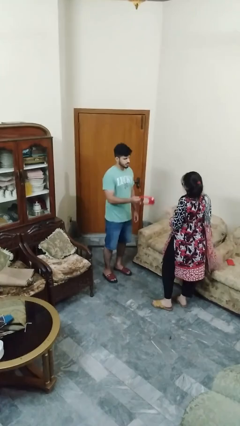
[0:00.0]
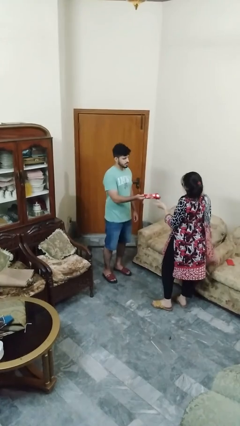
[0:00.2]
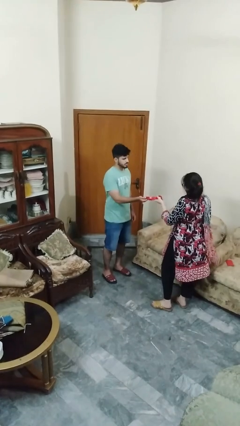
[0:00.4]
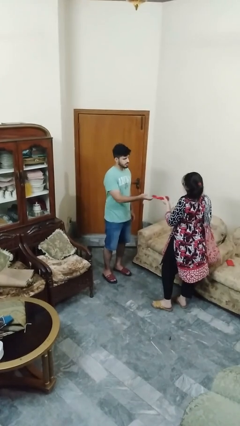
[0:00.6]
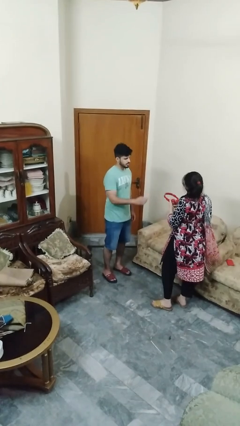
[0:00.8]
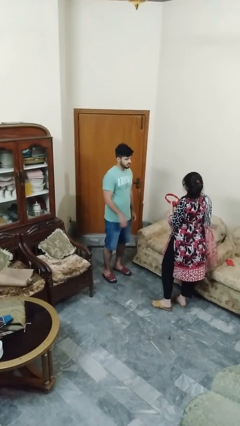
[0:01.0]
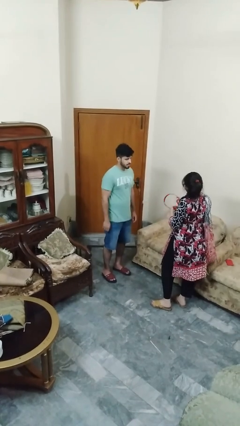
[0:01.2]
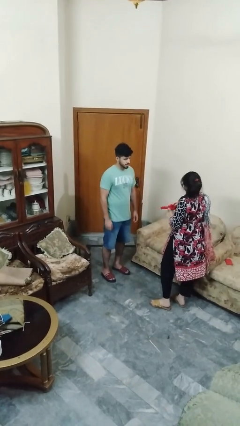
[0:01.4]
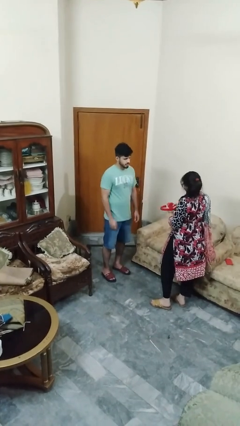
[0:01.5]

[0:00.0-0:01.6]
person transfers object to person

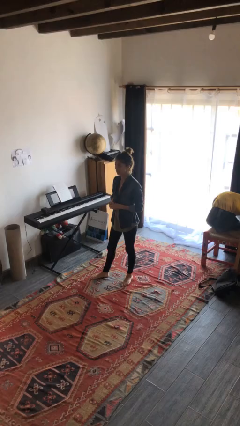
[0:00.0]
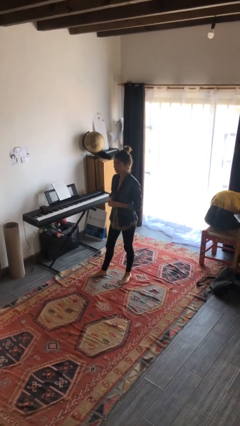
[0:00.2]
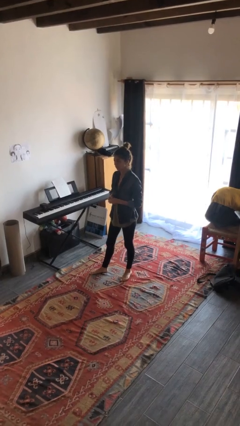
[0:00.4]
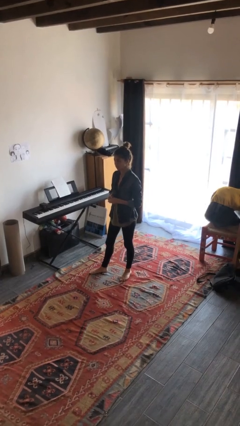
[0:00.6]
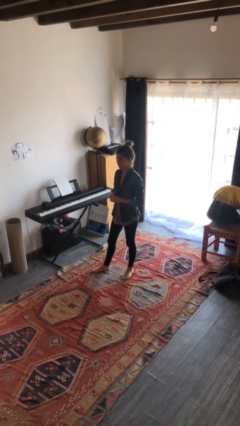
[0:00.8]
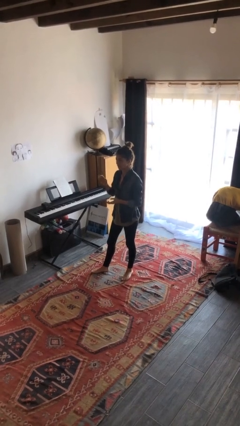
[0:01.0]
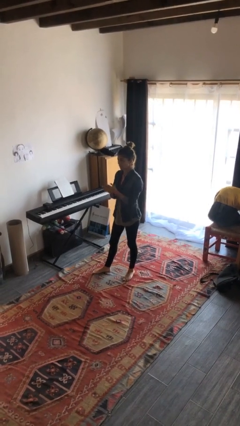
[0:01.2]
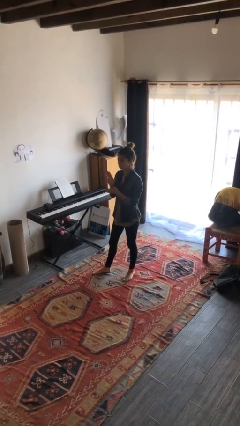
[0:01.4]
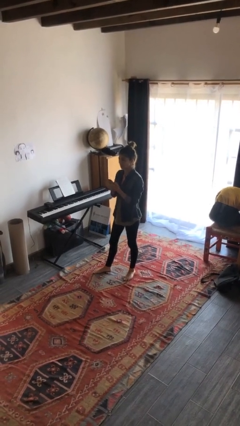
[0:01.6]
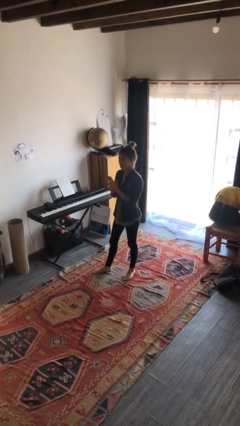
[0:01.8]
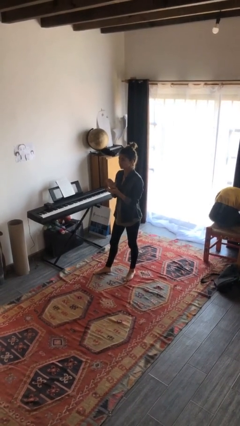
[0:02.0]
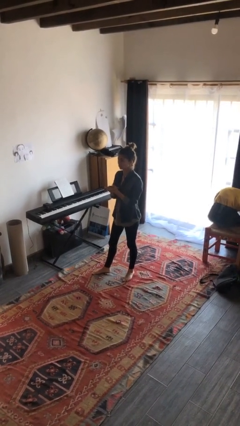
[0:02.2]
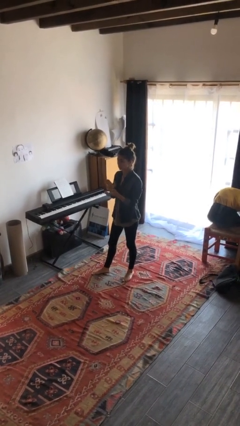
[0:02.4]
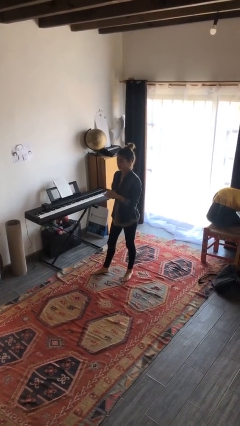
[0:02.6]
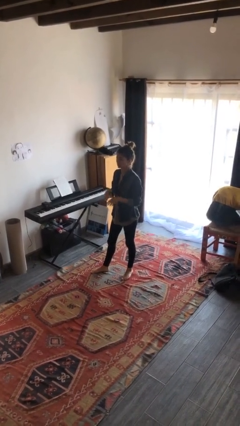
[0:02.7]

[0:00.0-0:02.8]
person claps hands

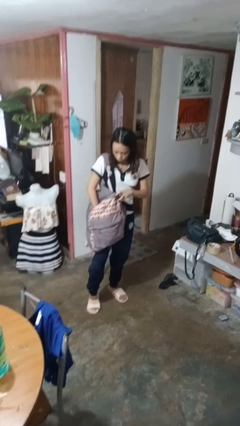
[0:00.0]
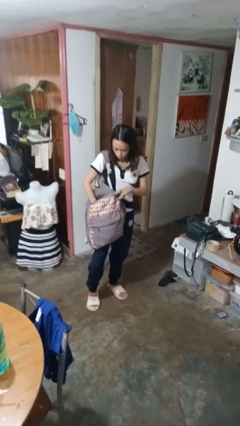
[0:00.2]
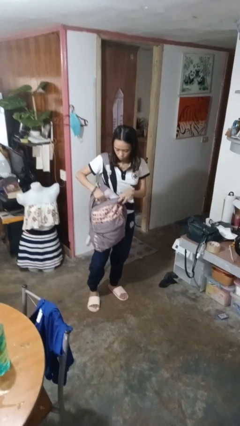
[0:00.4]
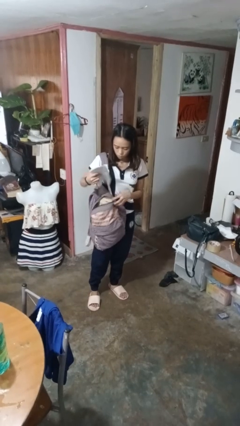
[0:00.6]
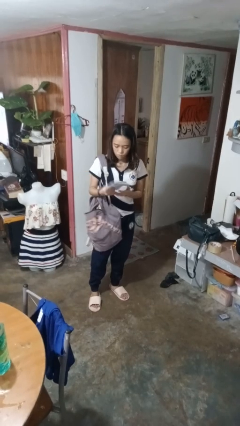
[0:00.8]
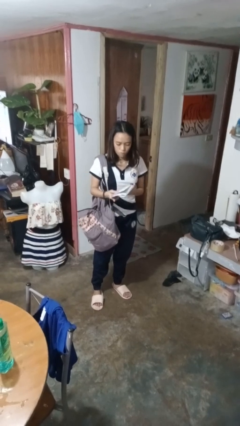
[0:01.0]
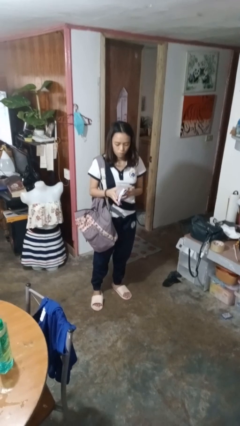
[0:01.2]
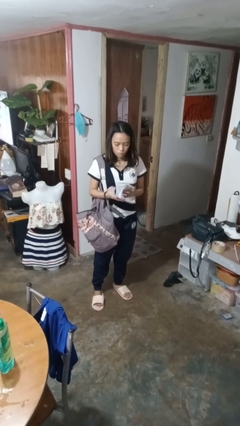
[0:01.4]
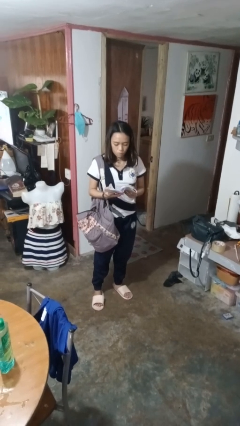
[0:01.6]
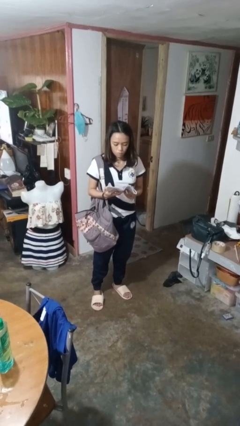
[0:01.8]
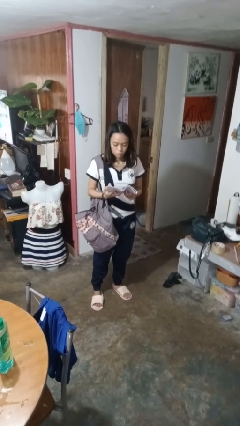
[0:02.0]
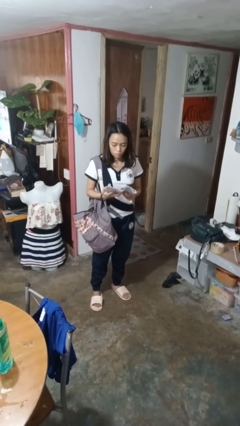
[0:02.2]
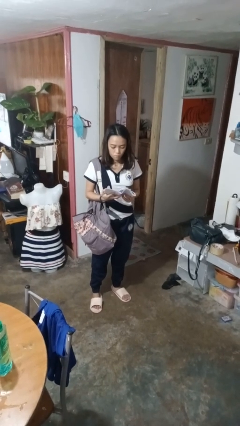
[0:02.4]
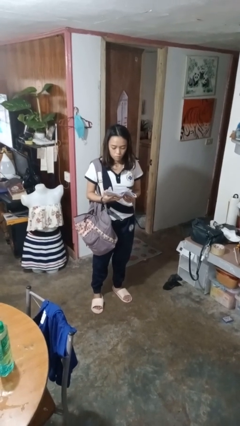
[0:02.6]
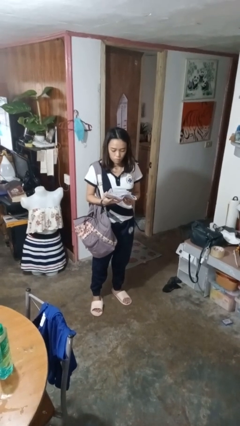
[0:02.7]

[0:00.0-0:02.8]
person takes object from backpack

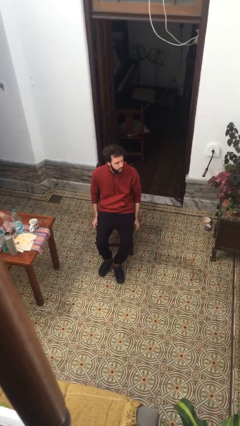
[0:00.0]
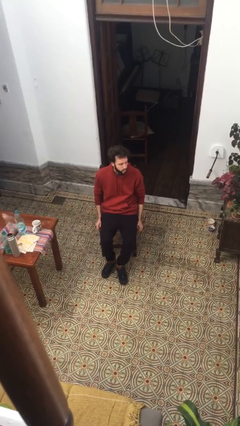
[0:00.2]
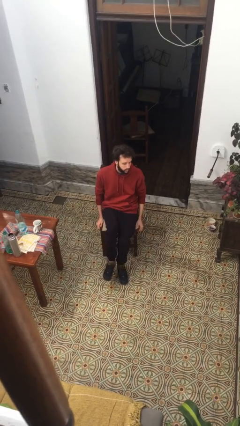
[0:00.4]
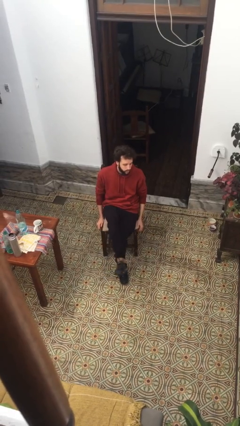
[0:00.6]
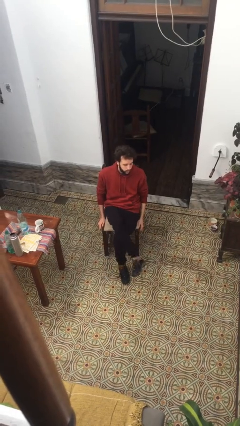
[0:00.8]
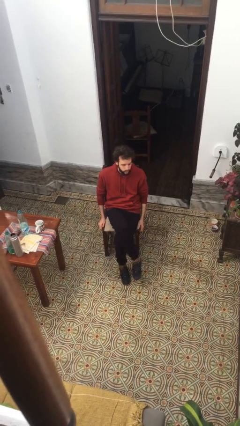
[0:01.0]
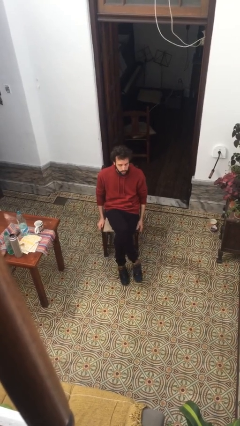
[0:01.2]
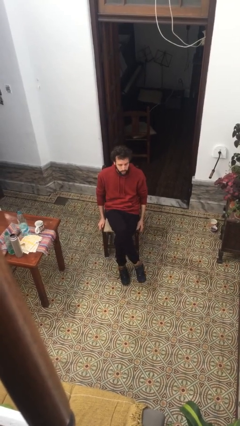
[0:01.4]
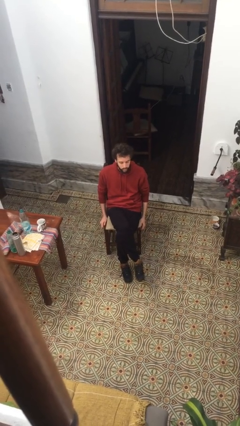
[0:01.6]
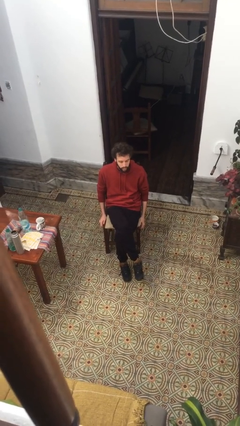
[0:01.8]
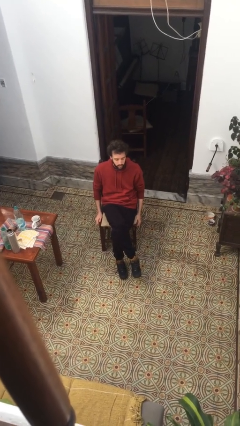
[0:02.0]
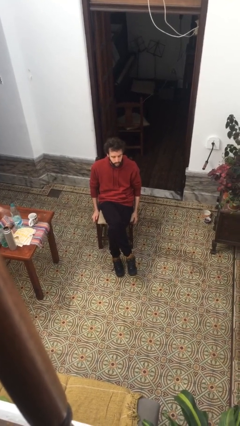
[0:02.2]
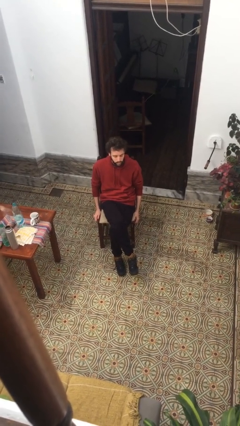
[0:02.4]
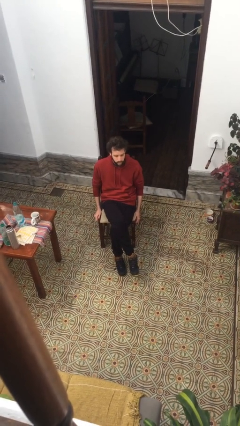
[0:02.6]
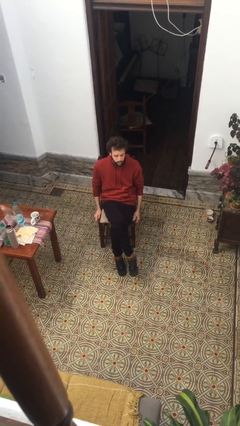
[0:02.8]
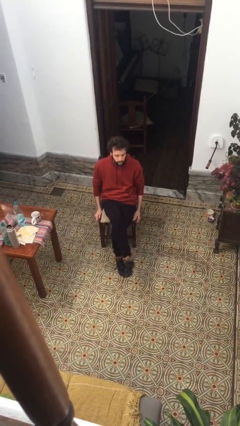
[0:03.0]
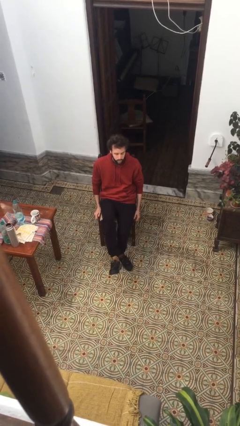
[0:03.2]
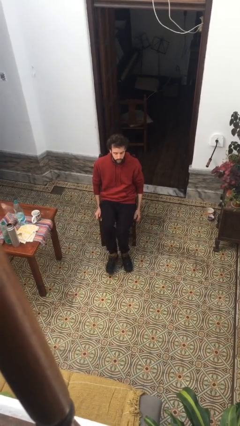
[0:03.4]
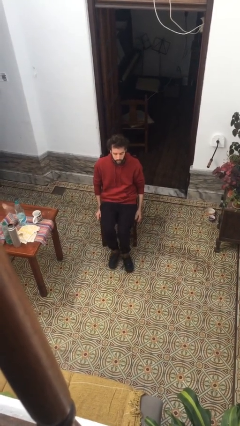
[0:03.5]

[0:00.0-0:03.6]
person crosses legs

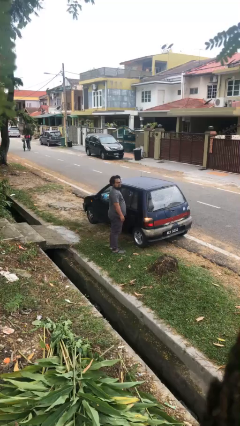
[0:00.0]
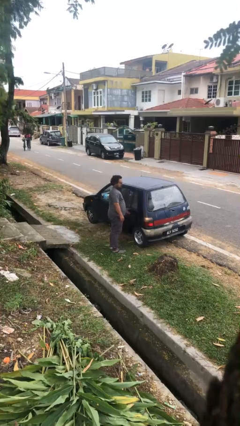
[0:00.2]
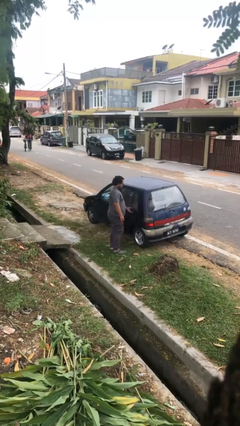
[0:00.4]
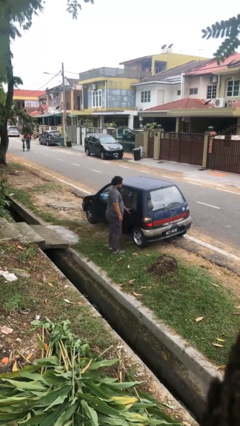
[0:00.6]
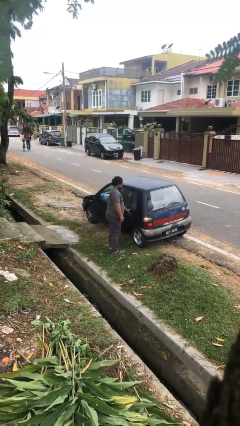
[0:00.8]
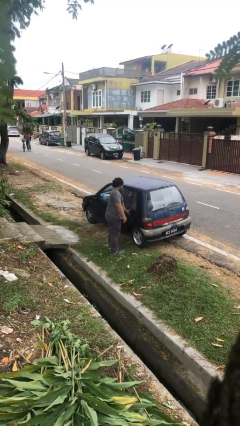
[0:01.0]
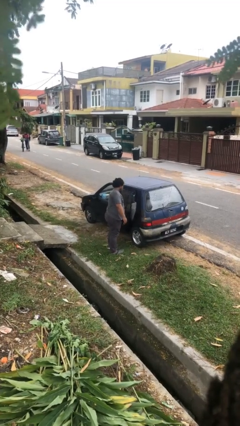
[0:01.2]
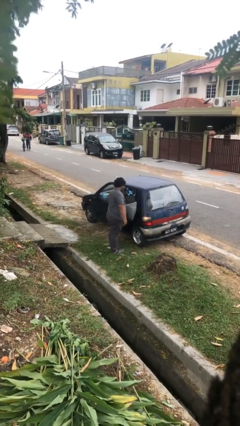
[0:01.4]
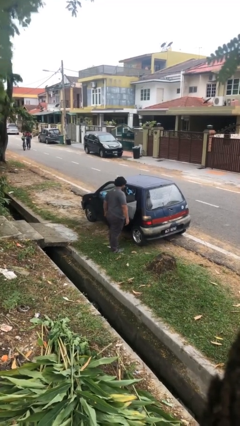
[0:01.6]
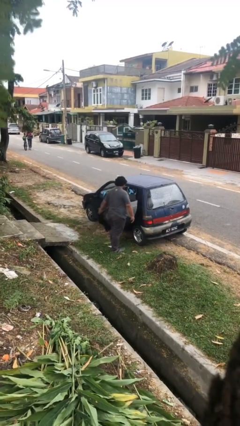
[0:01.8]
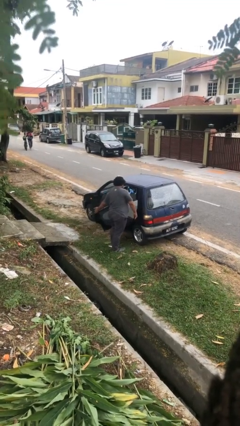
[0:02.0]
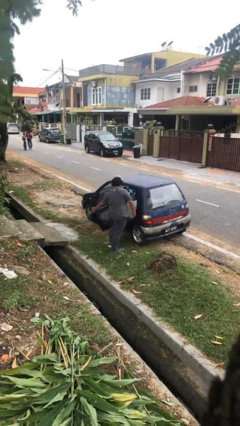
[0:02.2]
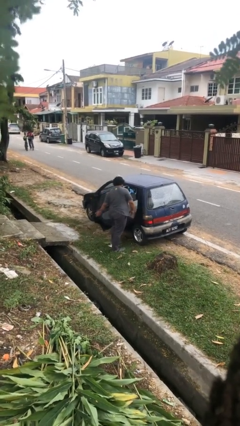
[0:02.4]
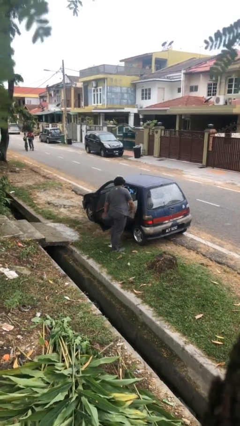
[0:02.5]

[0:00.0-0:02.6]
person opens car door

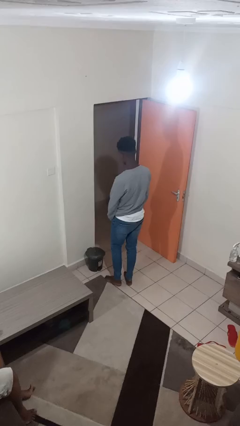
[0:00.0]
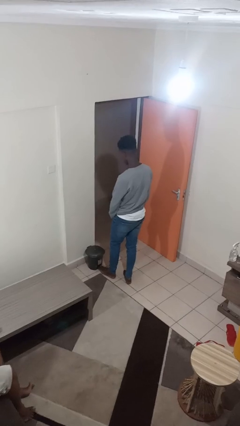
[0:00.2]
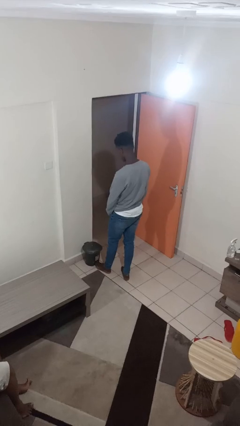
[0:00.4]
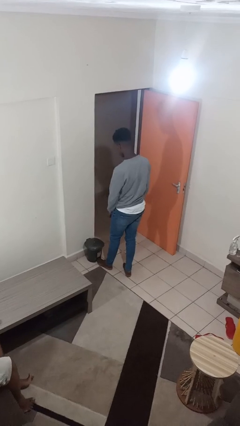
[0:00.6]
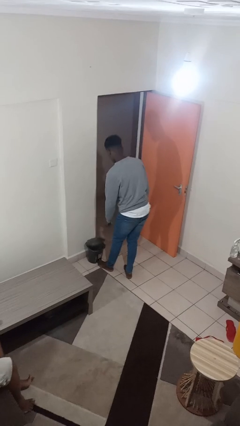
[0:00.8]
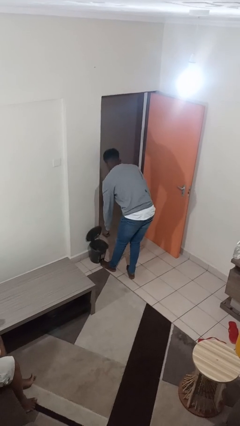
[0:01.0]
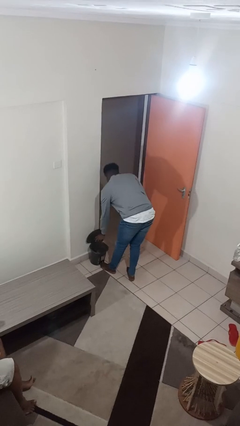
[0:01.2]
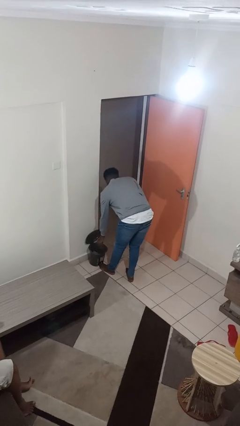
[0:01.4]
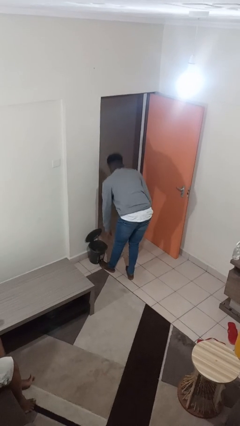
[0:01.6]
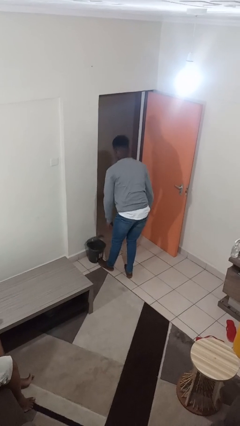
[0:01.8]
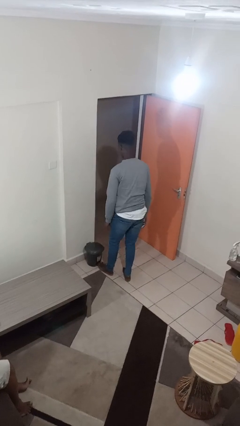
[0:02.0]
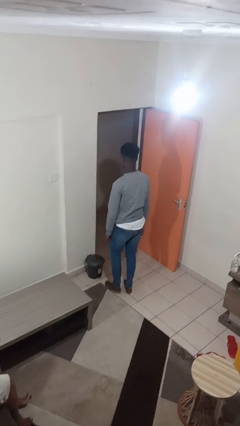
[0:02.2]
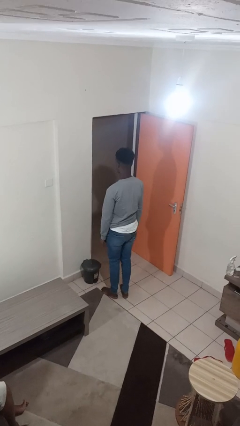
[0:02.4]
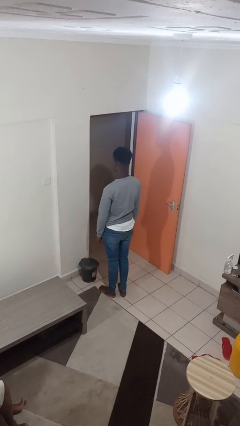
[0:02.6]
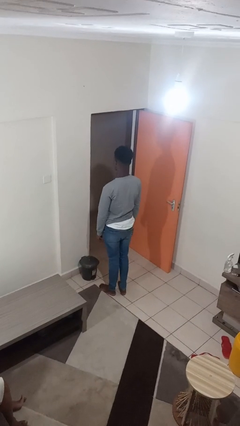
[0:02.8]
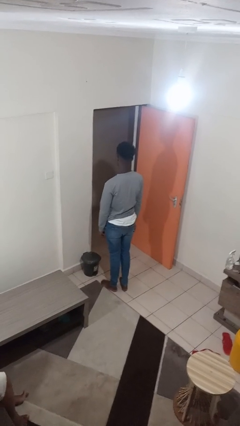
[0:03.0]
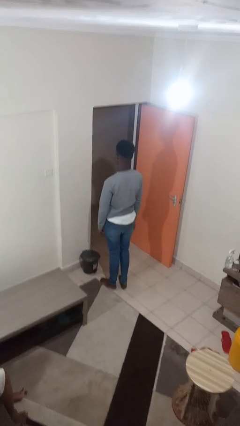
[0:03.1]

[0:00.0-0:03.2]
person discards trash

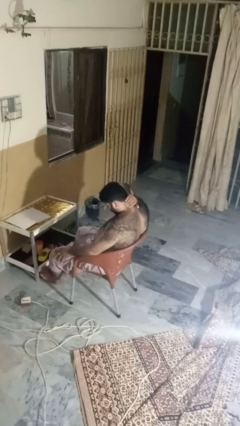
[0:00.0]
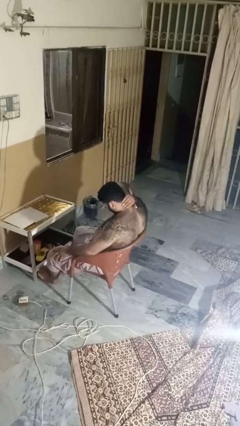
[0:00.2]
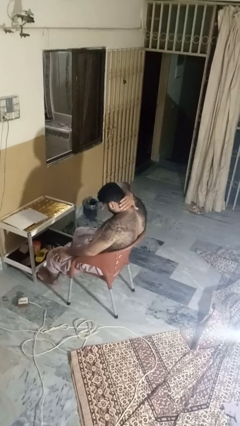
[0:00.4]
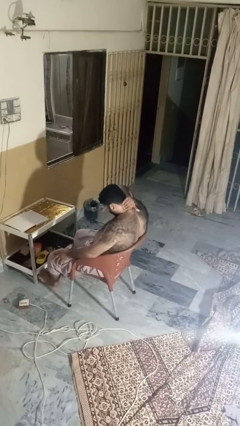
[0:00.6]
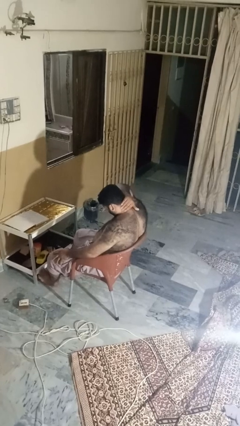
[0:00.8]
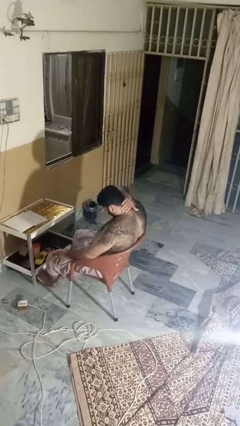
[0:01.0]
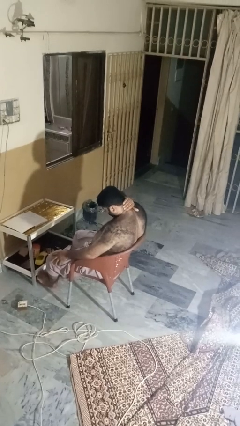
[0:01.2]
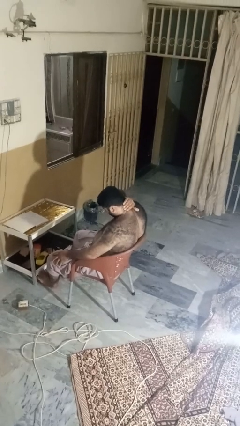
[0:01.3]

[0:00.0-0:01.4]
person rubs neck
